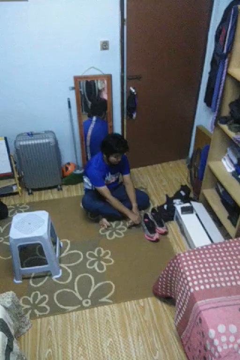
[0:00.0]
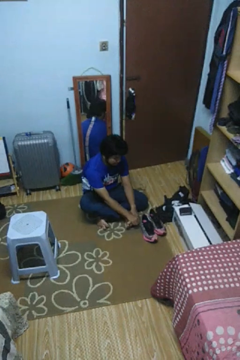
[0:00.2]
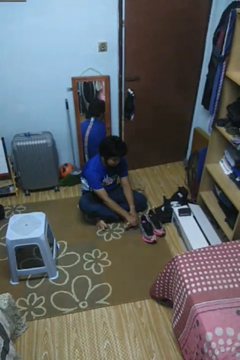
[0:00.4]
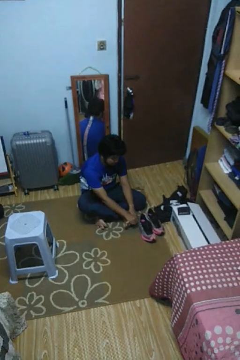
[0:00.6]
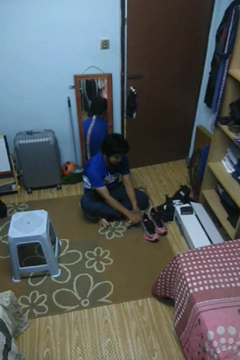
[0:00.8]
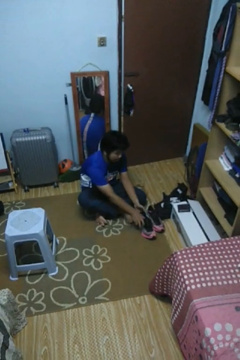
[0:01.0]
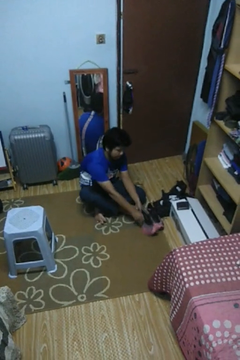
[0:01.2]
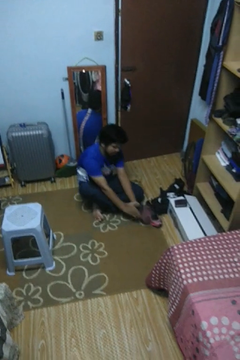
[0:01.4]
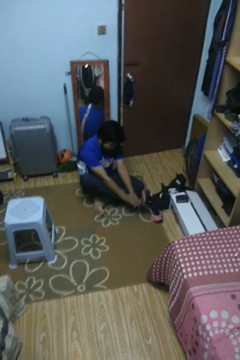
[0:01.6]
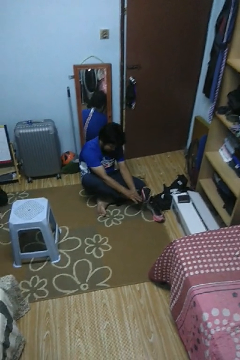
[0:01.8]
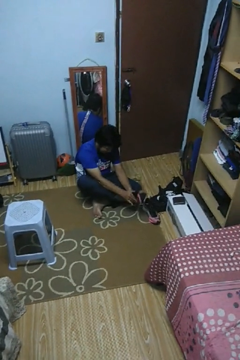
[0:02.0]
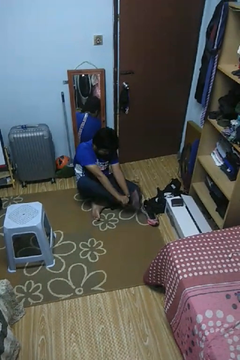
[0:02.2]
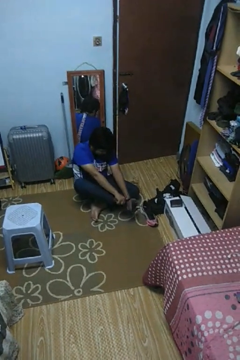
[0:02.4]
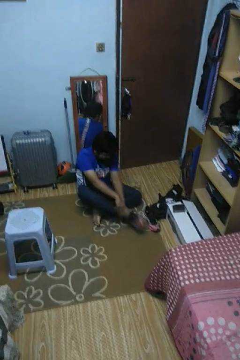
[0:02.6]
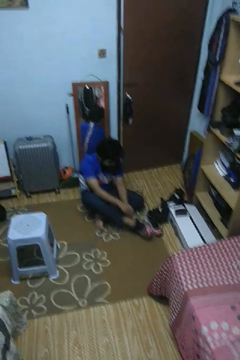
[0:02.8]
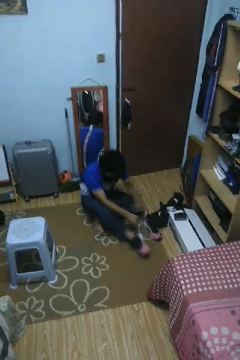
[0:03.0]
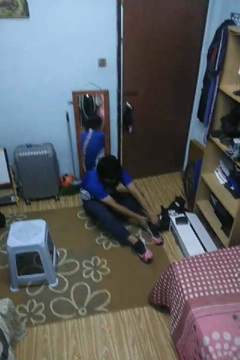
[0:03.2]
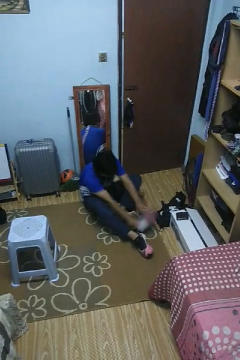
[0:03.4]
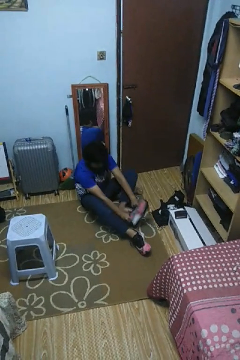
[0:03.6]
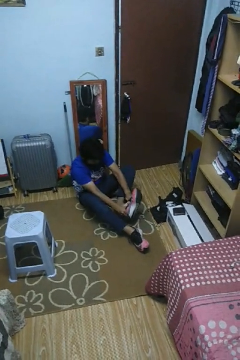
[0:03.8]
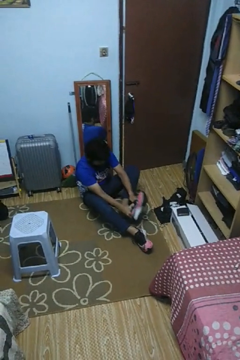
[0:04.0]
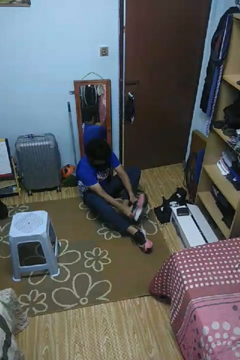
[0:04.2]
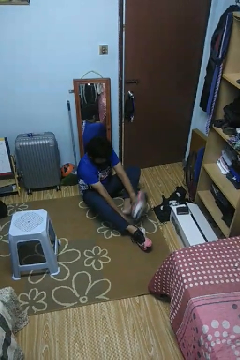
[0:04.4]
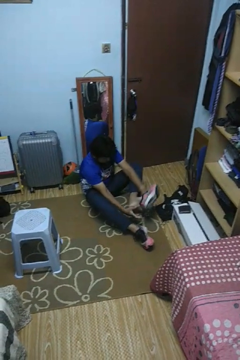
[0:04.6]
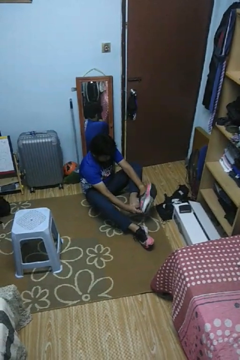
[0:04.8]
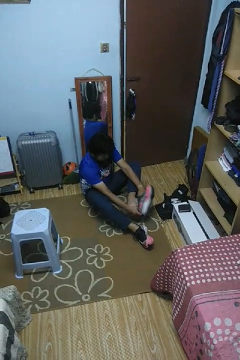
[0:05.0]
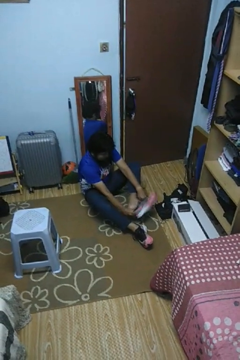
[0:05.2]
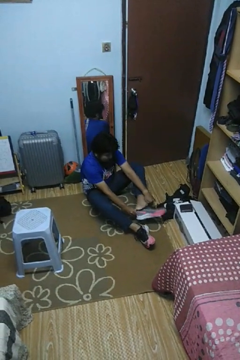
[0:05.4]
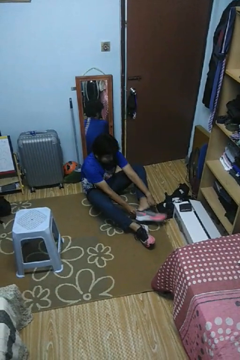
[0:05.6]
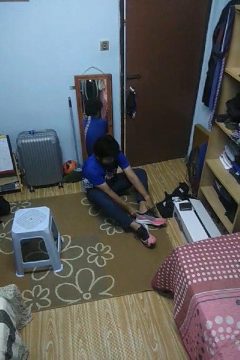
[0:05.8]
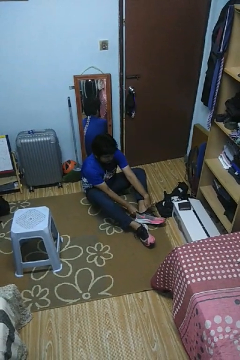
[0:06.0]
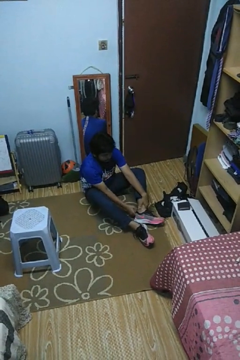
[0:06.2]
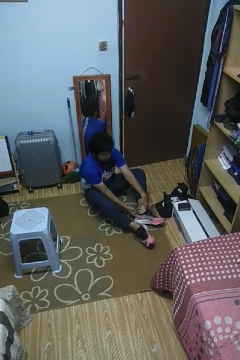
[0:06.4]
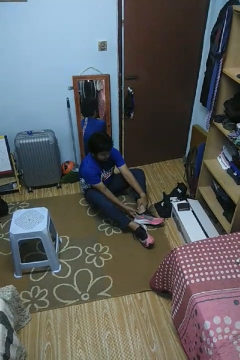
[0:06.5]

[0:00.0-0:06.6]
person puts on shoes

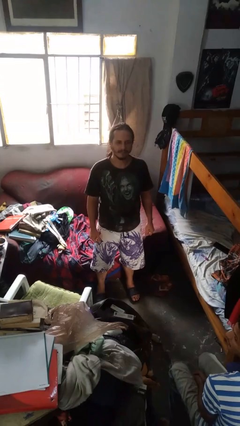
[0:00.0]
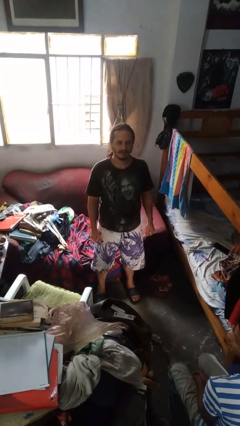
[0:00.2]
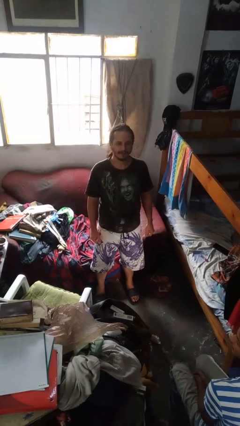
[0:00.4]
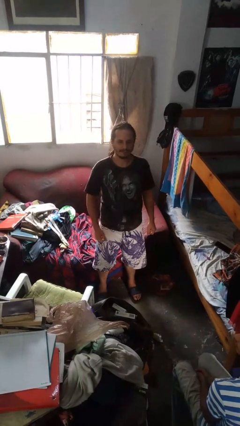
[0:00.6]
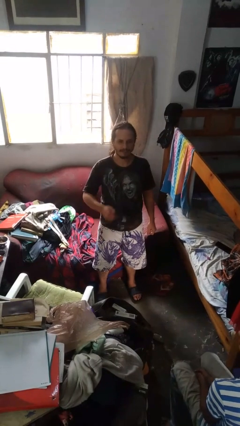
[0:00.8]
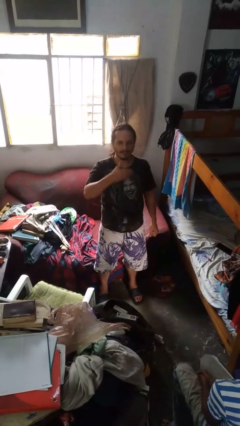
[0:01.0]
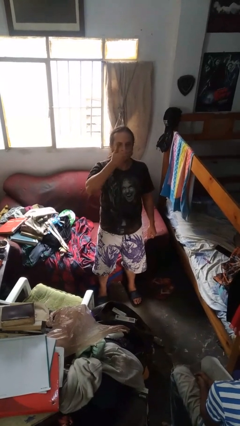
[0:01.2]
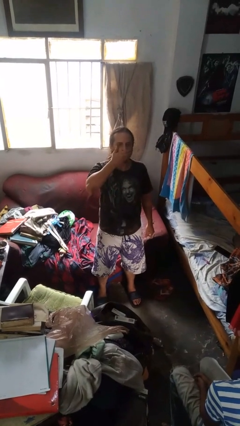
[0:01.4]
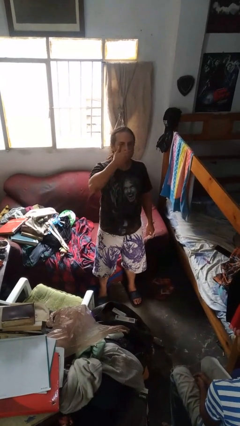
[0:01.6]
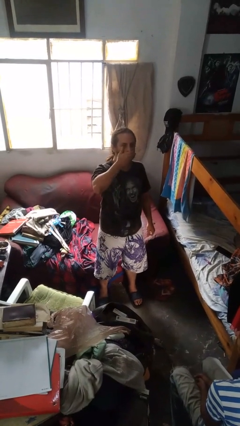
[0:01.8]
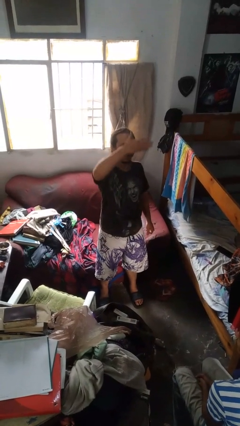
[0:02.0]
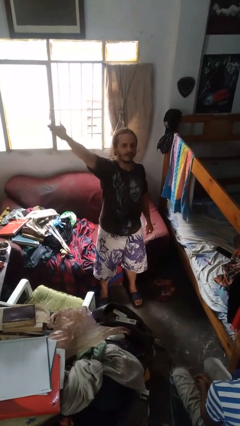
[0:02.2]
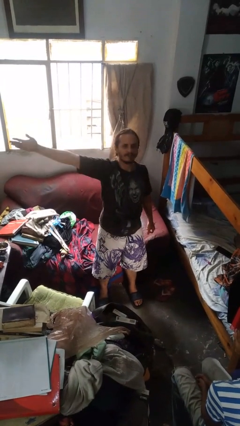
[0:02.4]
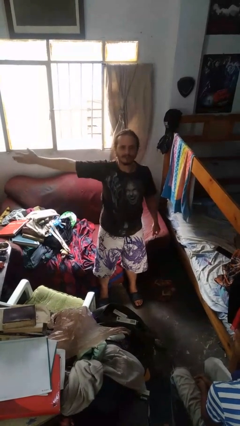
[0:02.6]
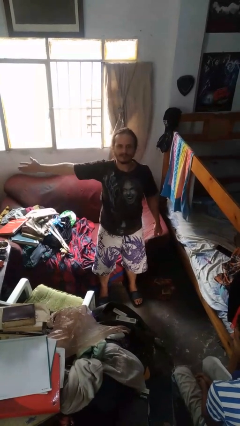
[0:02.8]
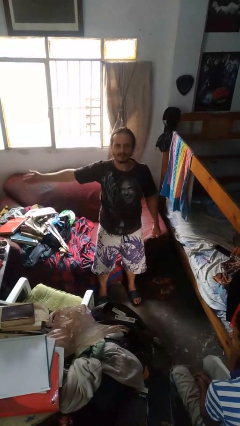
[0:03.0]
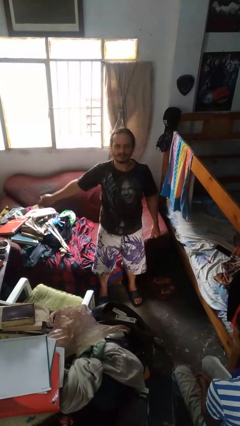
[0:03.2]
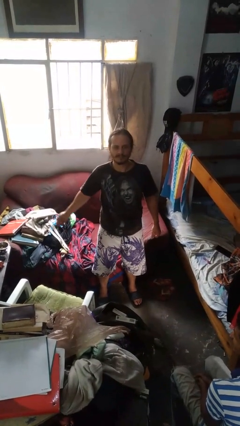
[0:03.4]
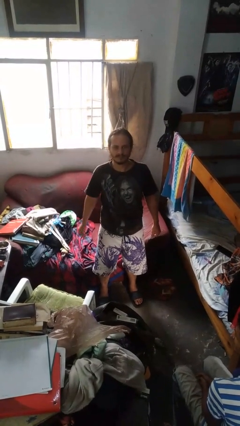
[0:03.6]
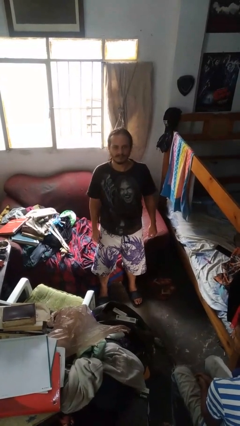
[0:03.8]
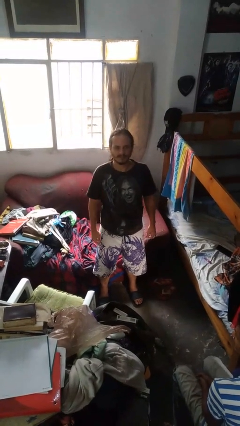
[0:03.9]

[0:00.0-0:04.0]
person gestures blow kiss

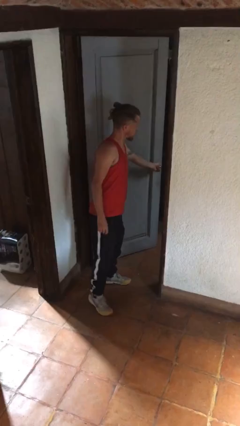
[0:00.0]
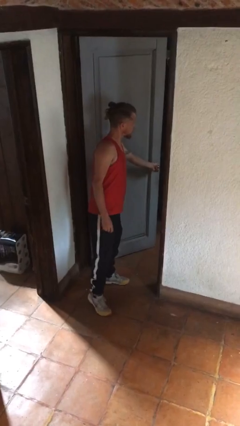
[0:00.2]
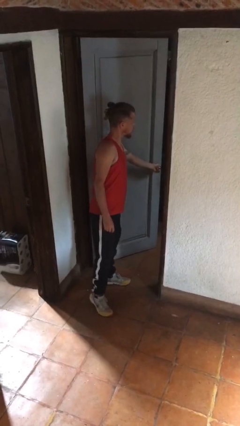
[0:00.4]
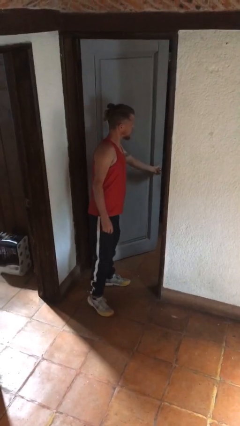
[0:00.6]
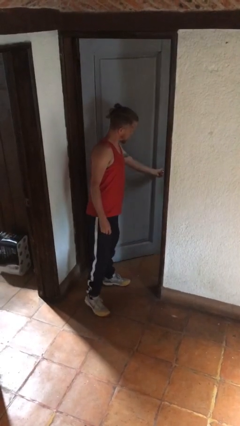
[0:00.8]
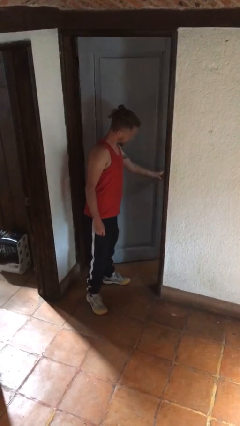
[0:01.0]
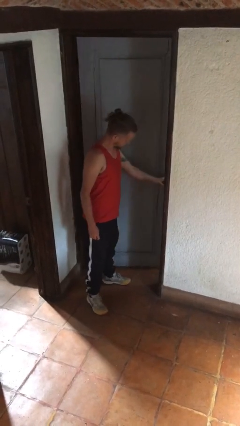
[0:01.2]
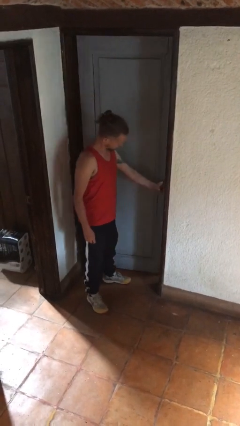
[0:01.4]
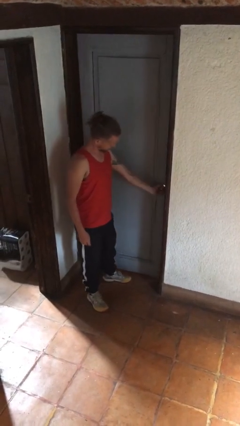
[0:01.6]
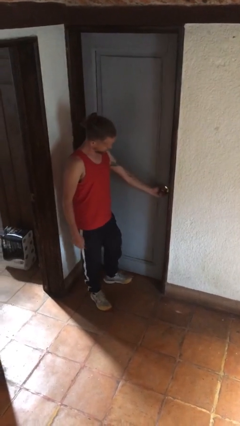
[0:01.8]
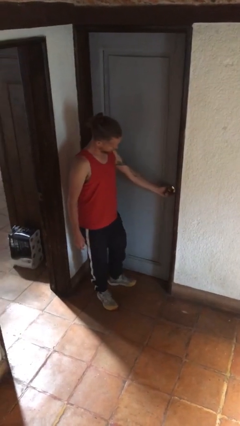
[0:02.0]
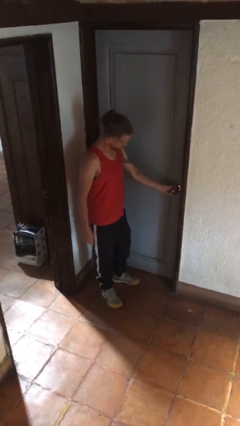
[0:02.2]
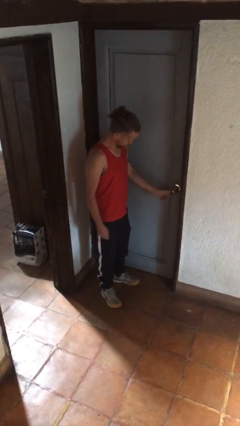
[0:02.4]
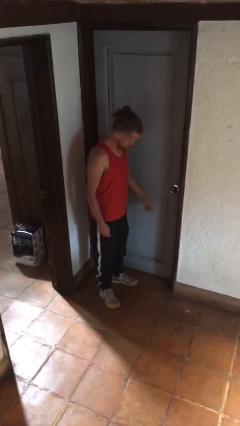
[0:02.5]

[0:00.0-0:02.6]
person closes facility door

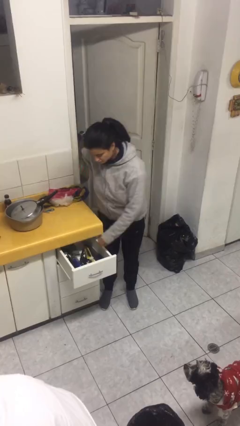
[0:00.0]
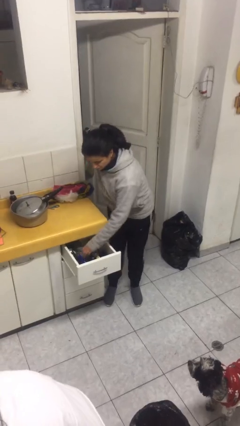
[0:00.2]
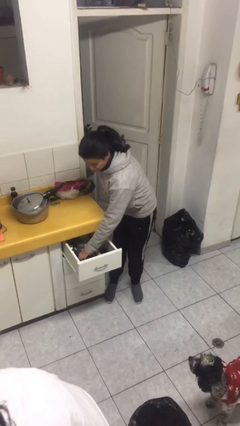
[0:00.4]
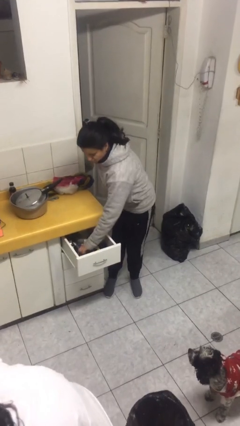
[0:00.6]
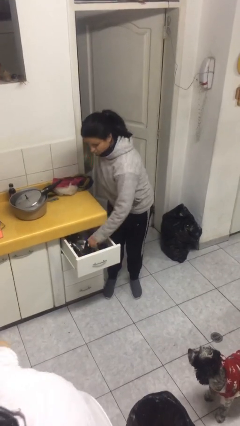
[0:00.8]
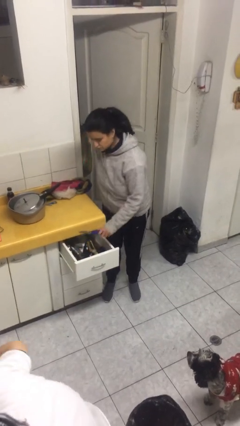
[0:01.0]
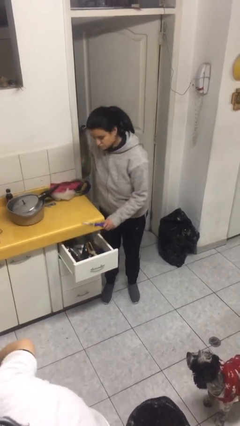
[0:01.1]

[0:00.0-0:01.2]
person takes object from kitchen drawer

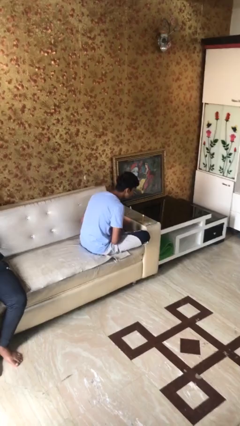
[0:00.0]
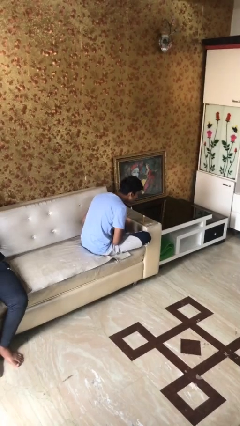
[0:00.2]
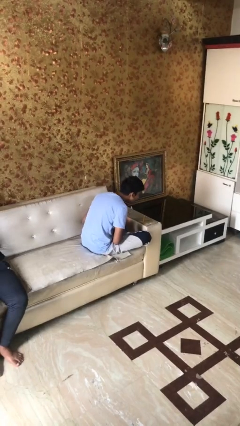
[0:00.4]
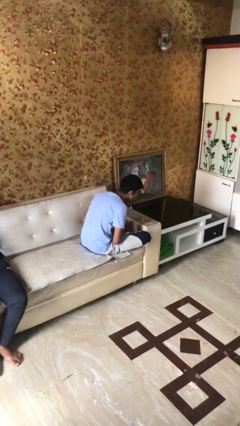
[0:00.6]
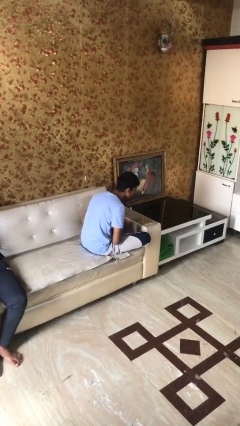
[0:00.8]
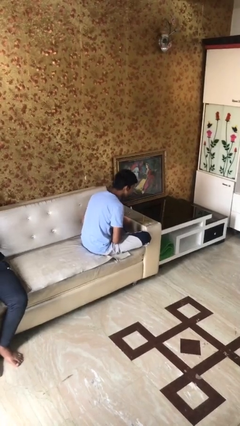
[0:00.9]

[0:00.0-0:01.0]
person extinguishes candle

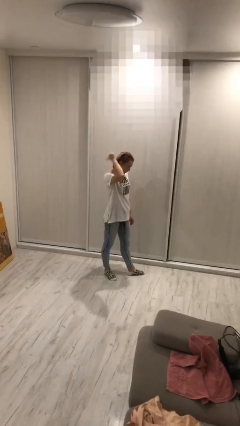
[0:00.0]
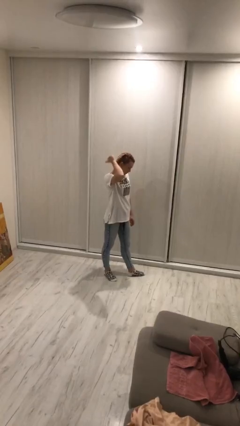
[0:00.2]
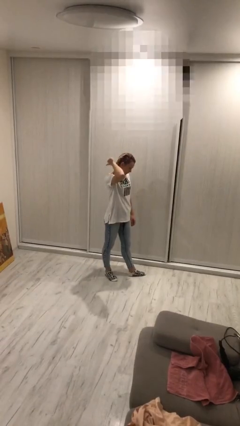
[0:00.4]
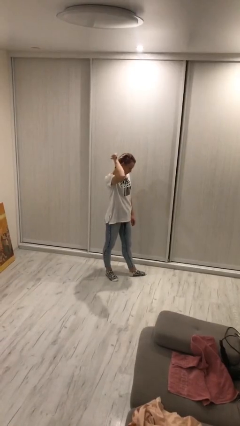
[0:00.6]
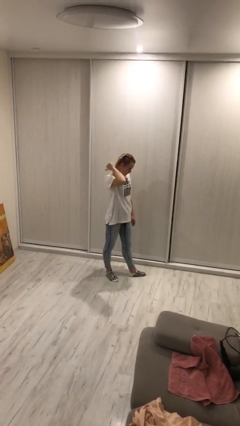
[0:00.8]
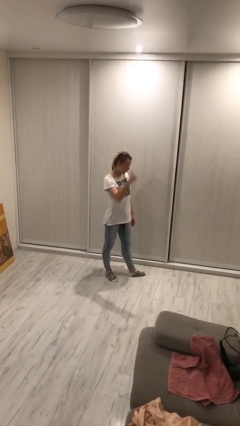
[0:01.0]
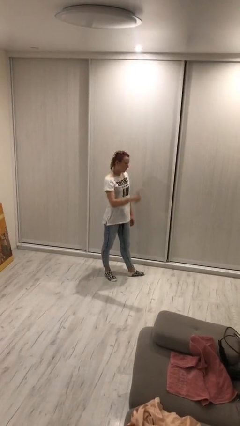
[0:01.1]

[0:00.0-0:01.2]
person gestures behind me

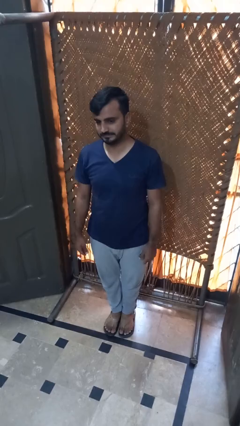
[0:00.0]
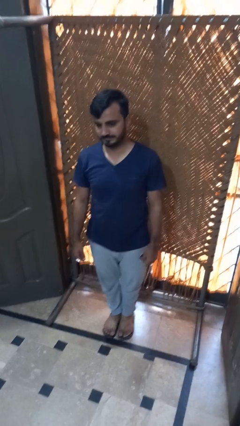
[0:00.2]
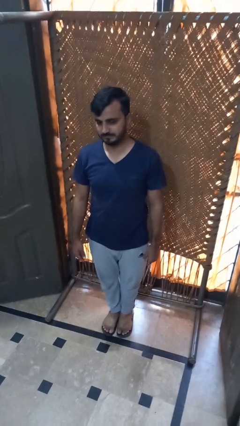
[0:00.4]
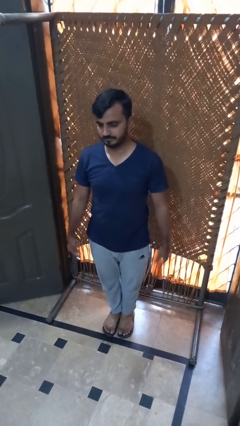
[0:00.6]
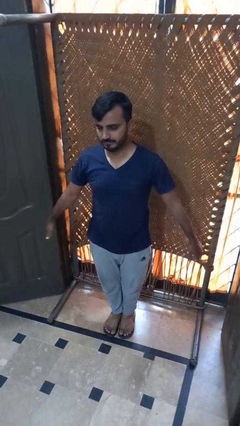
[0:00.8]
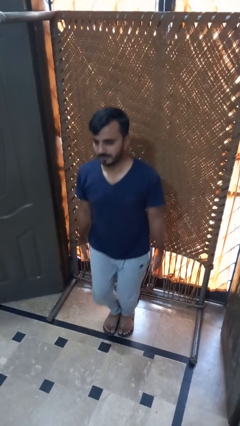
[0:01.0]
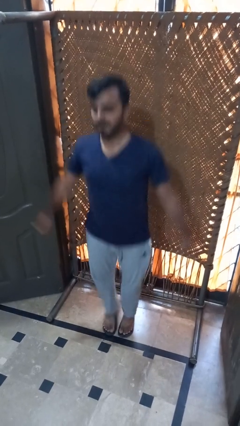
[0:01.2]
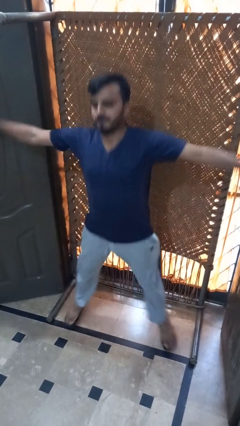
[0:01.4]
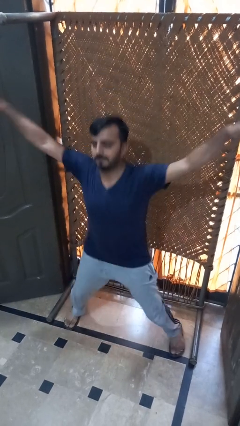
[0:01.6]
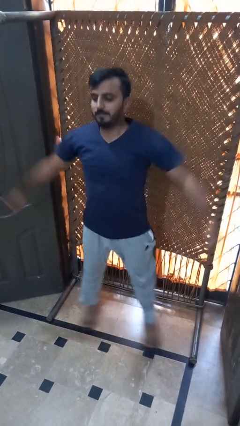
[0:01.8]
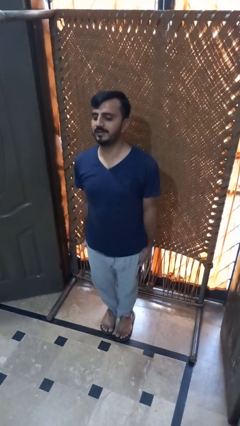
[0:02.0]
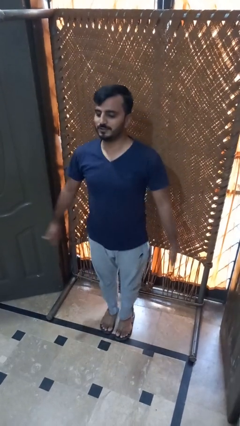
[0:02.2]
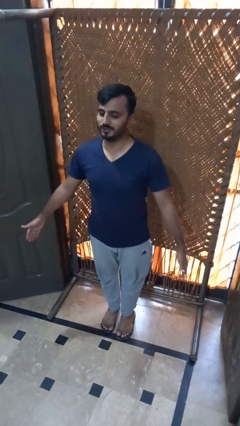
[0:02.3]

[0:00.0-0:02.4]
person exercises with jumping jacks
